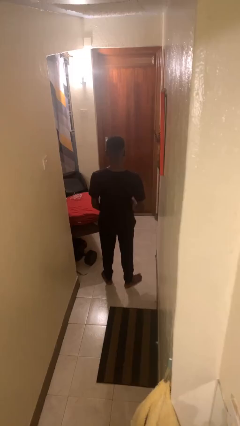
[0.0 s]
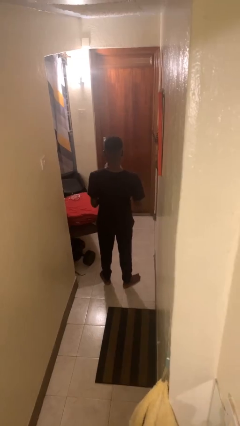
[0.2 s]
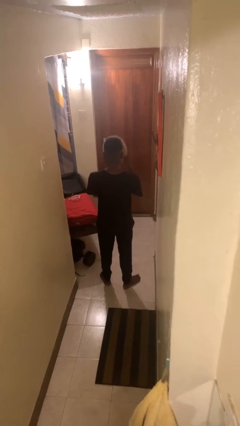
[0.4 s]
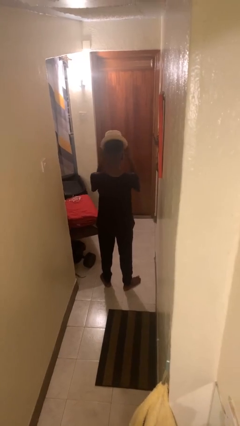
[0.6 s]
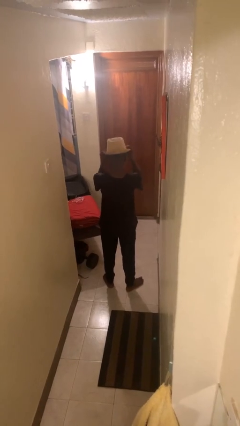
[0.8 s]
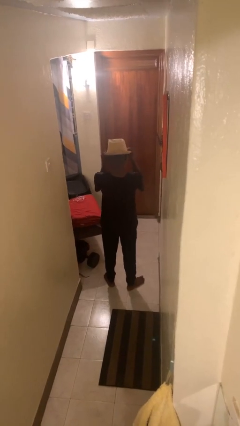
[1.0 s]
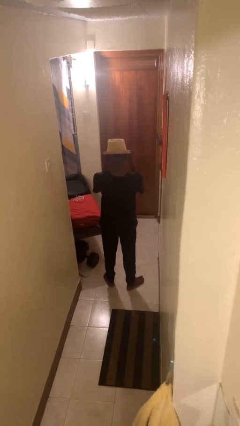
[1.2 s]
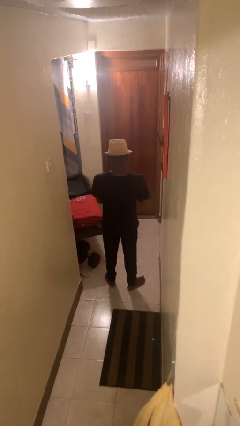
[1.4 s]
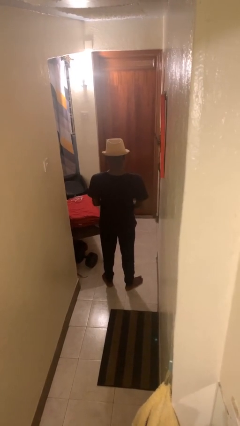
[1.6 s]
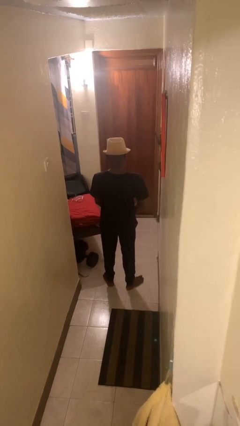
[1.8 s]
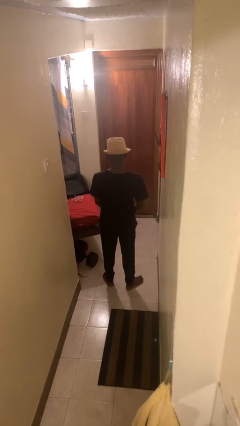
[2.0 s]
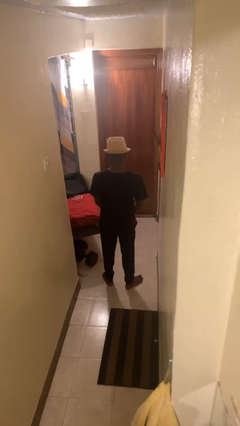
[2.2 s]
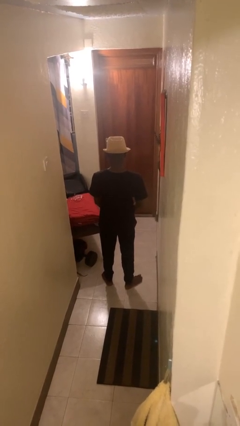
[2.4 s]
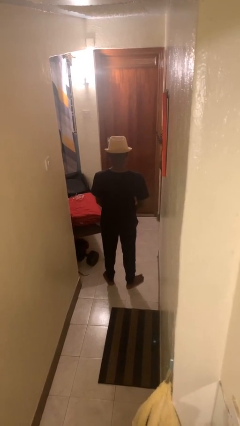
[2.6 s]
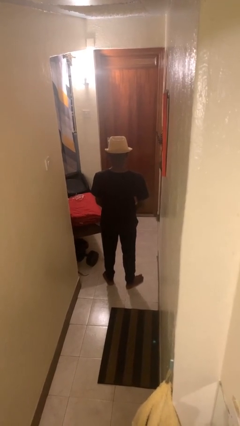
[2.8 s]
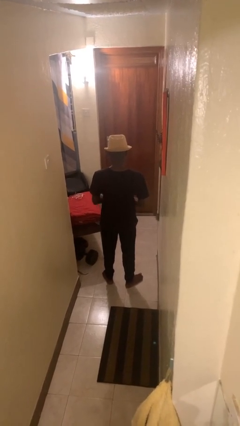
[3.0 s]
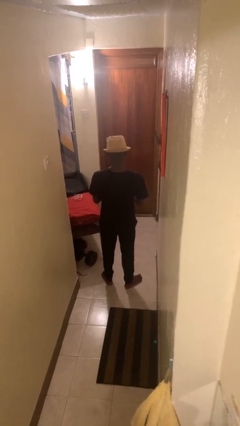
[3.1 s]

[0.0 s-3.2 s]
person puts on hat

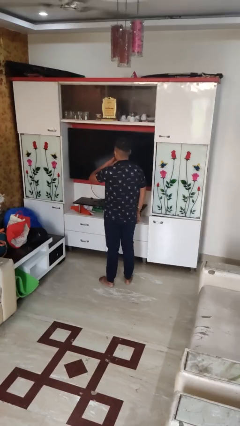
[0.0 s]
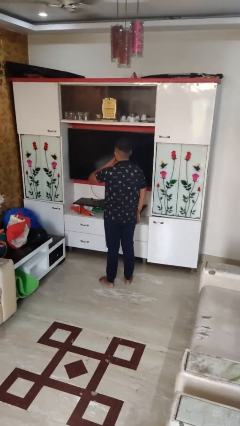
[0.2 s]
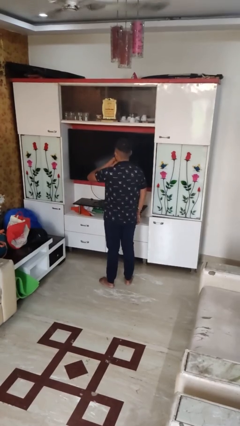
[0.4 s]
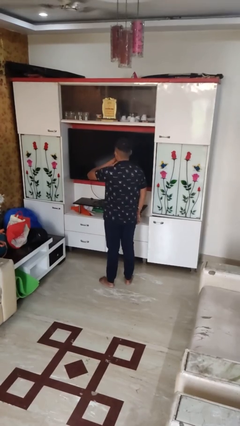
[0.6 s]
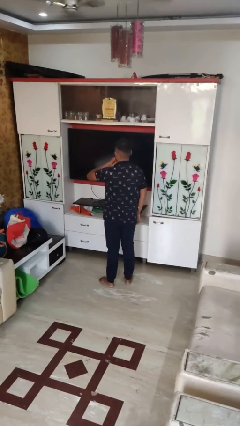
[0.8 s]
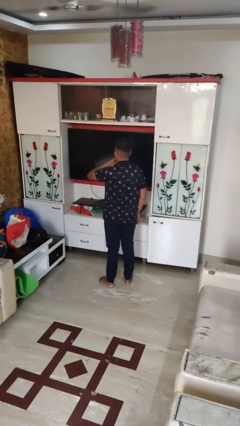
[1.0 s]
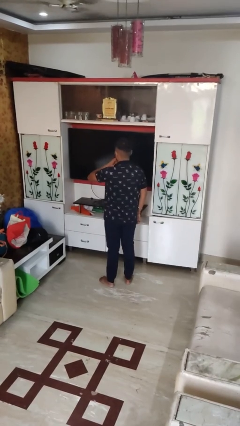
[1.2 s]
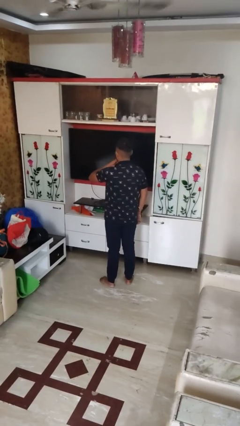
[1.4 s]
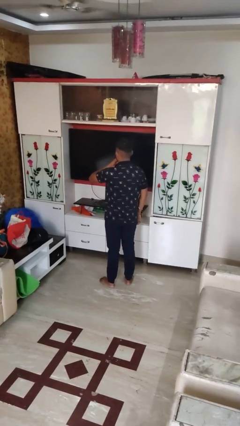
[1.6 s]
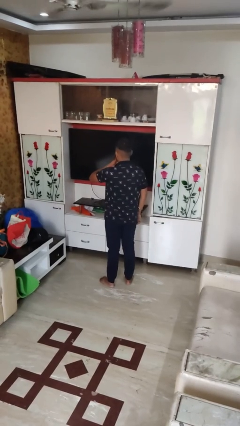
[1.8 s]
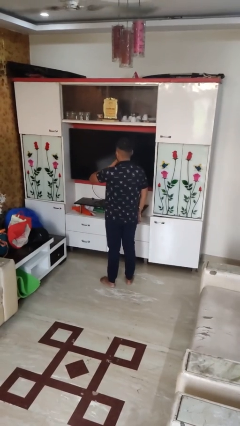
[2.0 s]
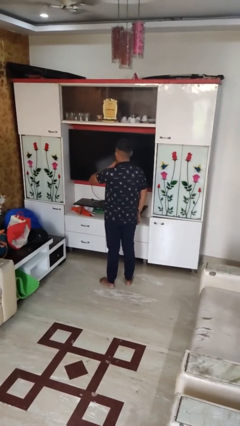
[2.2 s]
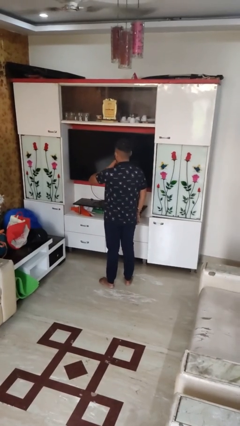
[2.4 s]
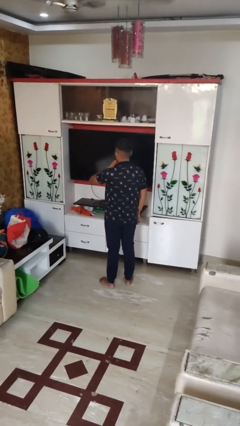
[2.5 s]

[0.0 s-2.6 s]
person strokes chin

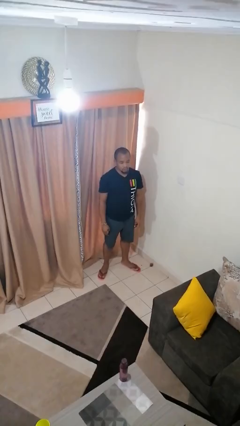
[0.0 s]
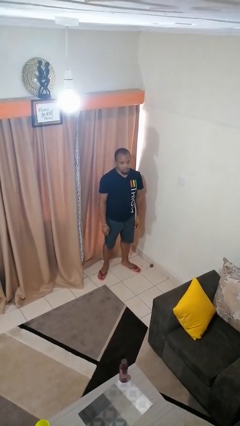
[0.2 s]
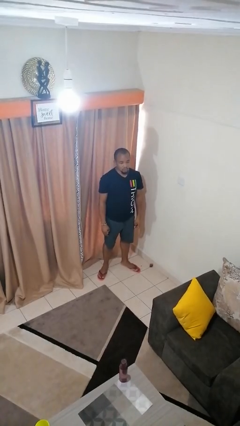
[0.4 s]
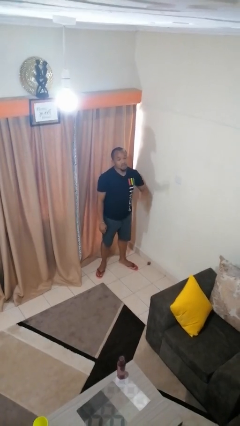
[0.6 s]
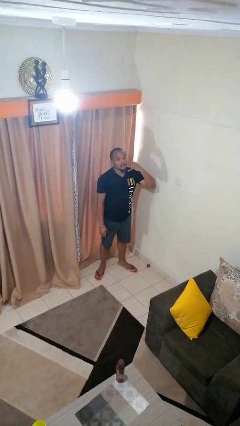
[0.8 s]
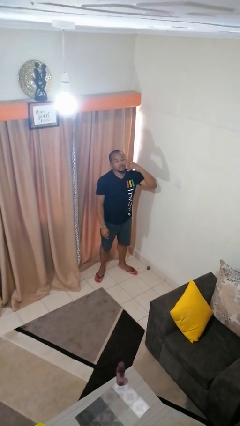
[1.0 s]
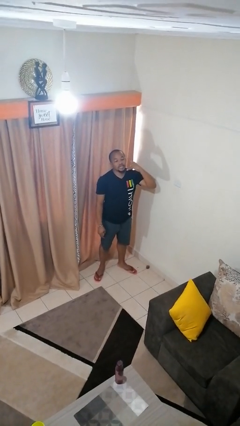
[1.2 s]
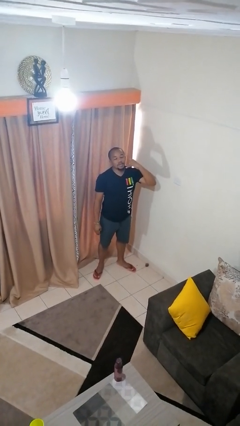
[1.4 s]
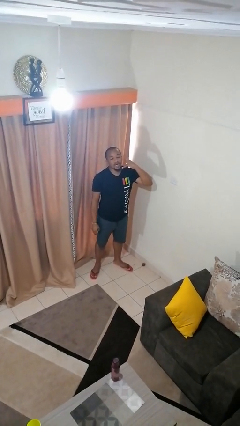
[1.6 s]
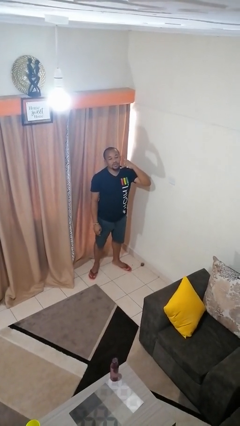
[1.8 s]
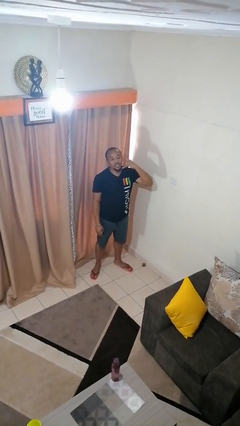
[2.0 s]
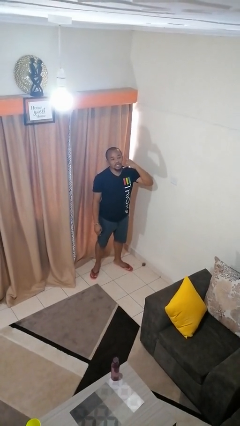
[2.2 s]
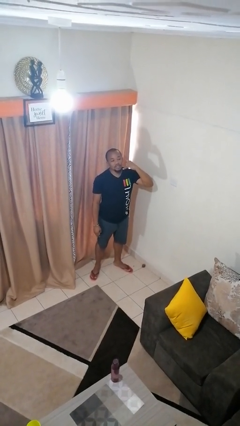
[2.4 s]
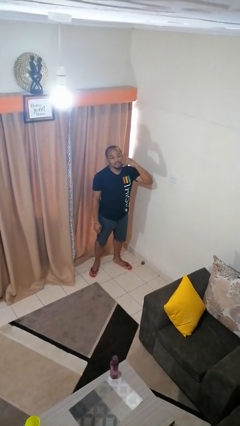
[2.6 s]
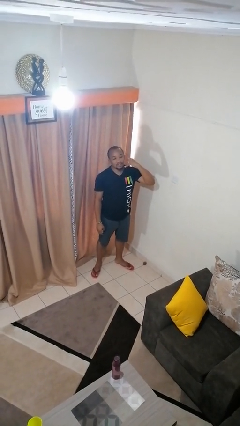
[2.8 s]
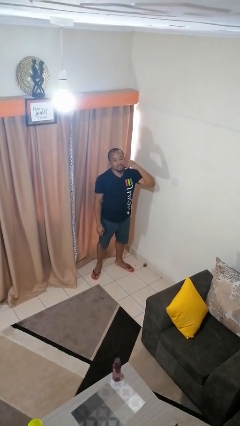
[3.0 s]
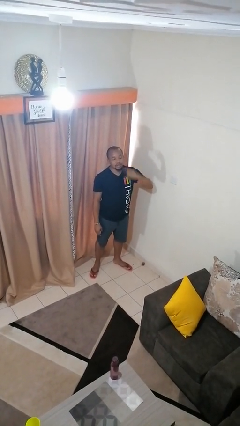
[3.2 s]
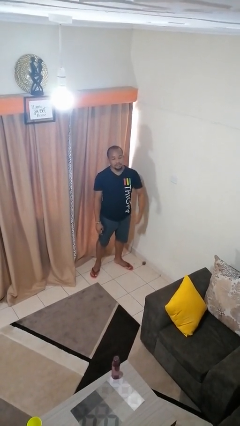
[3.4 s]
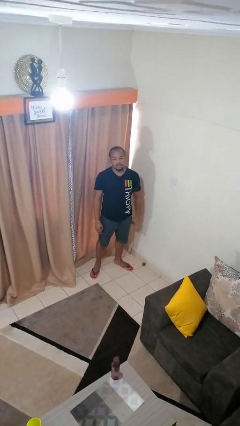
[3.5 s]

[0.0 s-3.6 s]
person gestures call me

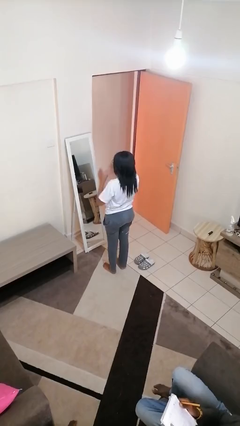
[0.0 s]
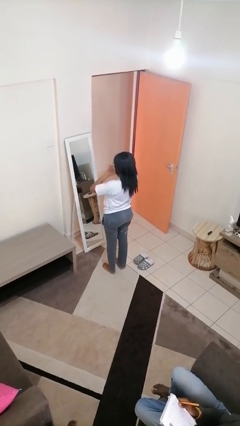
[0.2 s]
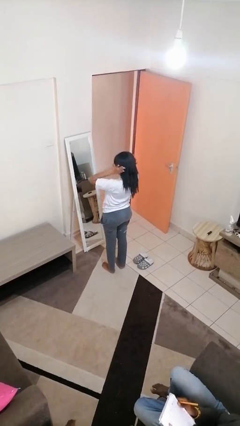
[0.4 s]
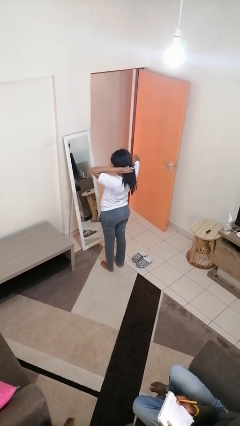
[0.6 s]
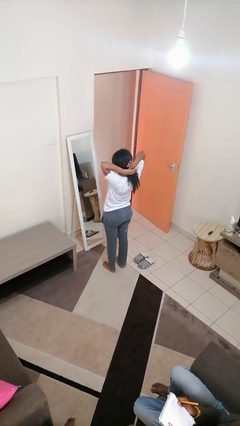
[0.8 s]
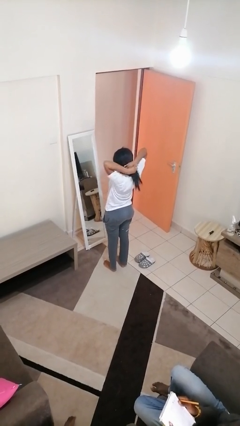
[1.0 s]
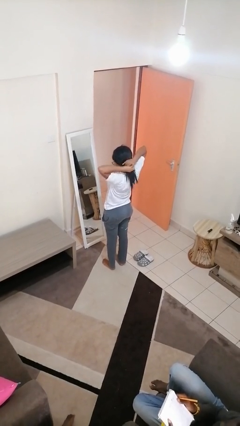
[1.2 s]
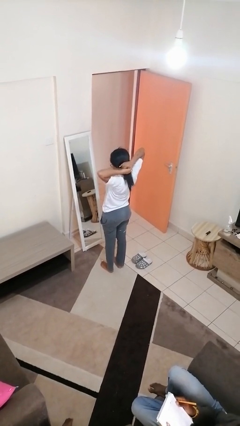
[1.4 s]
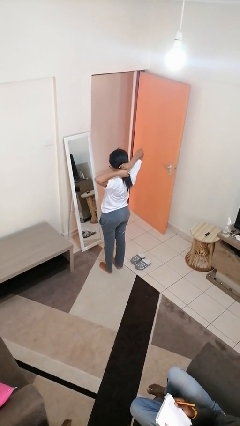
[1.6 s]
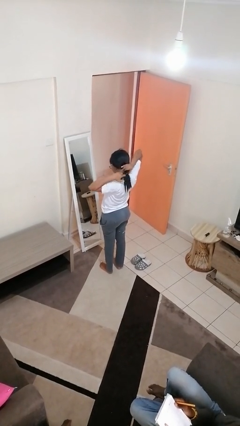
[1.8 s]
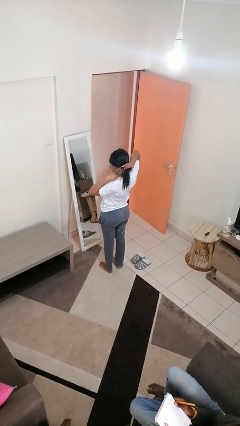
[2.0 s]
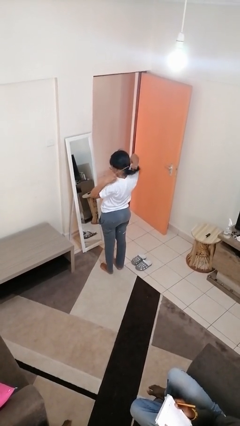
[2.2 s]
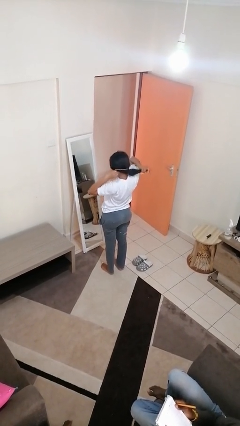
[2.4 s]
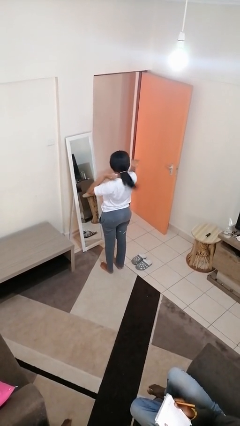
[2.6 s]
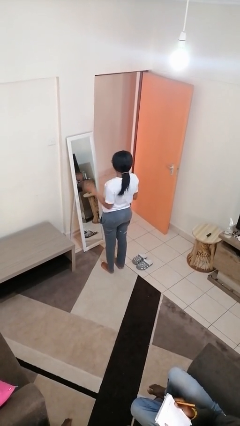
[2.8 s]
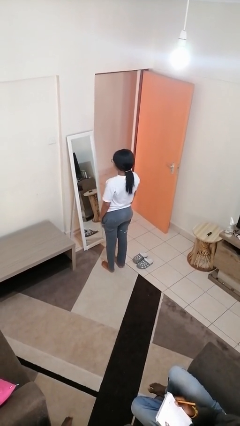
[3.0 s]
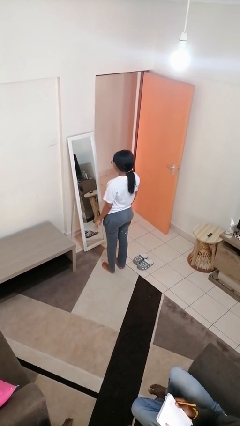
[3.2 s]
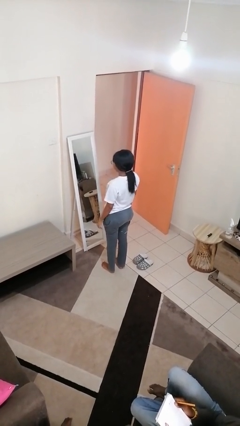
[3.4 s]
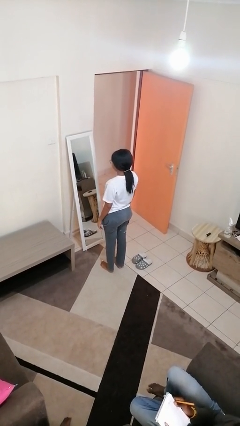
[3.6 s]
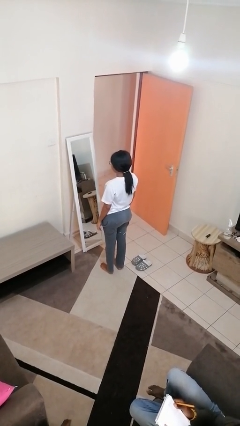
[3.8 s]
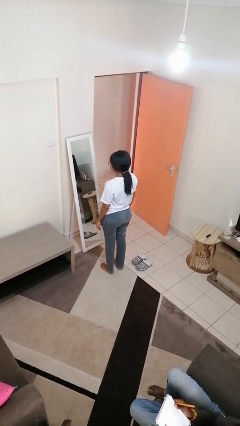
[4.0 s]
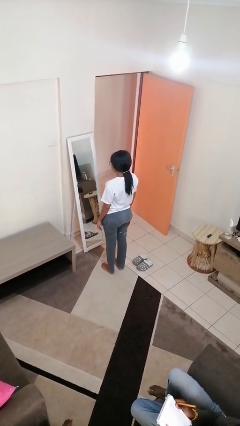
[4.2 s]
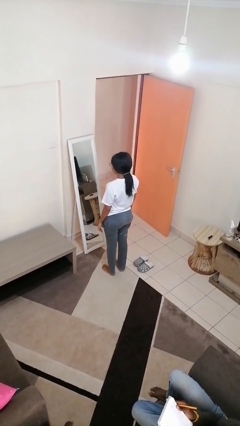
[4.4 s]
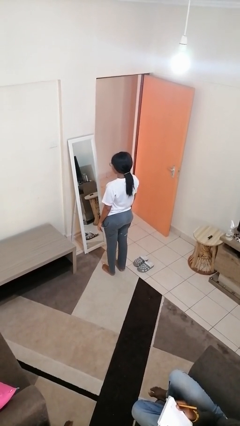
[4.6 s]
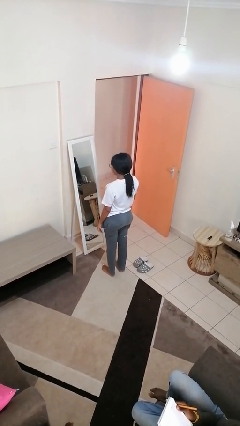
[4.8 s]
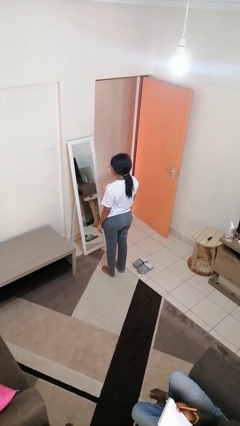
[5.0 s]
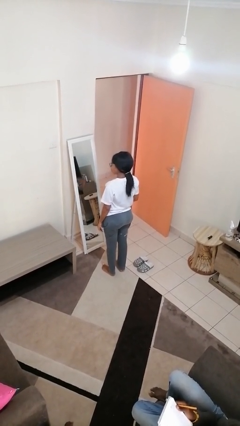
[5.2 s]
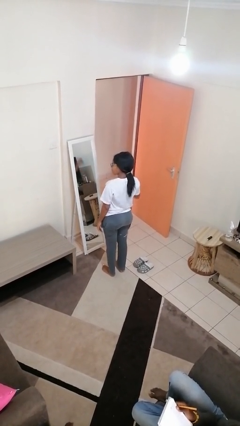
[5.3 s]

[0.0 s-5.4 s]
person puts hair in ponytail

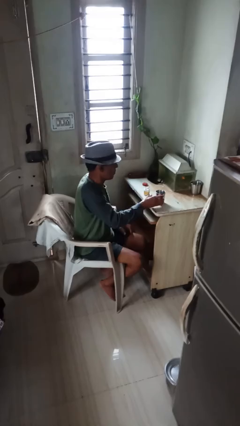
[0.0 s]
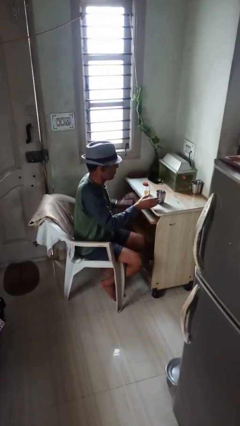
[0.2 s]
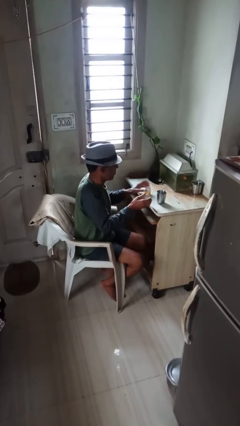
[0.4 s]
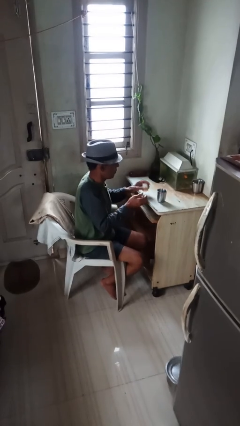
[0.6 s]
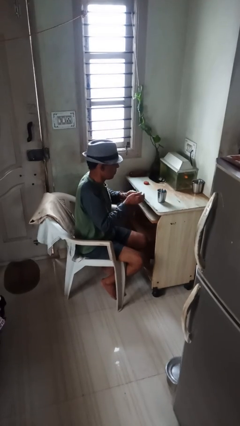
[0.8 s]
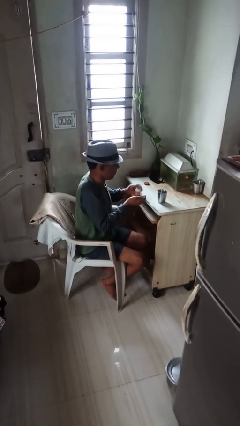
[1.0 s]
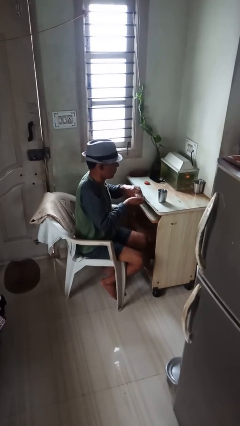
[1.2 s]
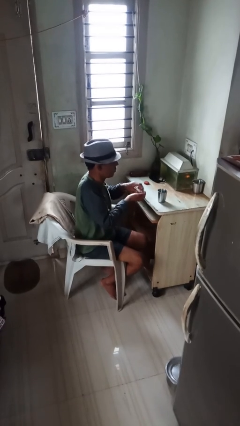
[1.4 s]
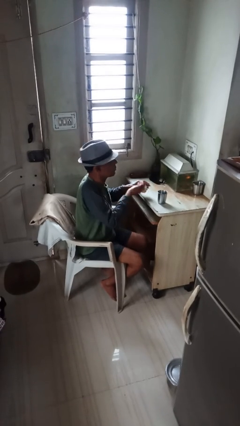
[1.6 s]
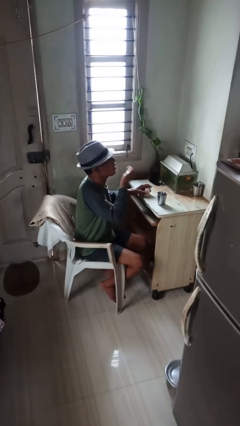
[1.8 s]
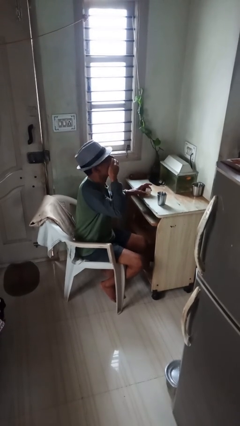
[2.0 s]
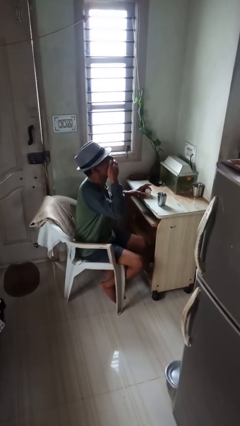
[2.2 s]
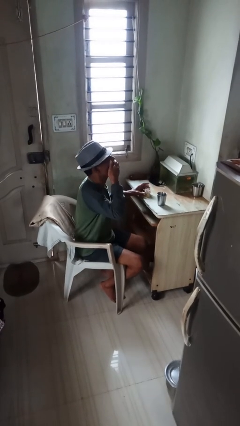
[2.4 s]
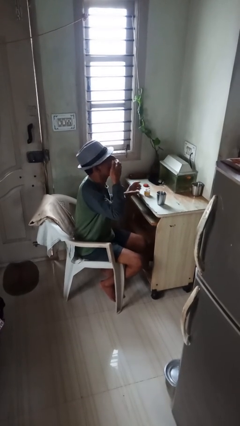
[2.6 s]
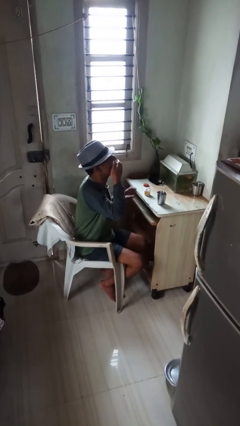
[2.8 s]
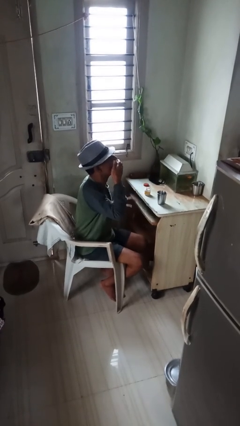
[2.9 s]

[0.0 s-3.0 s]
person takes medicine pills
